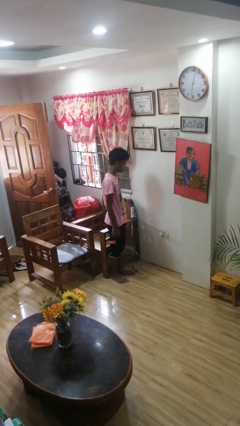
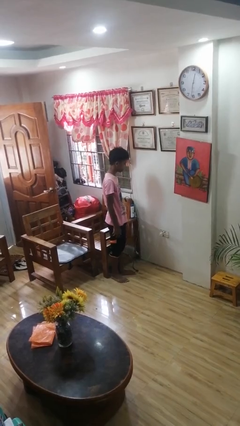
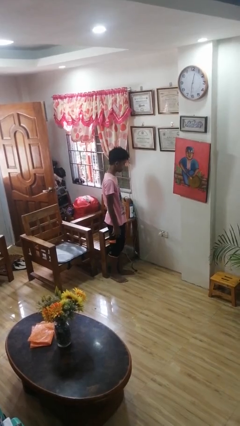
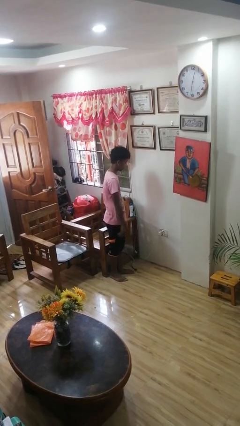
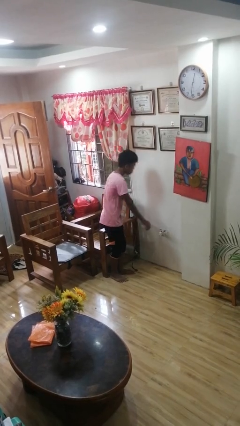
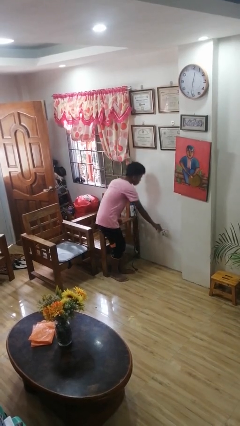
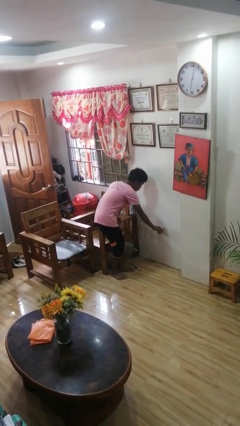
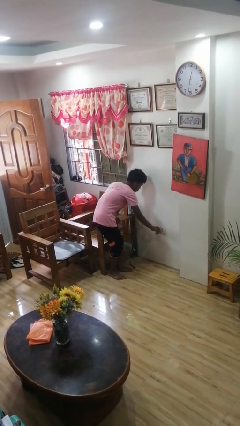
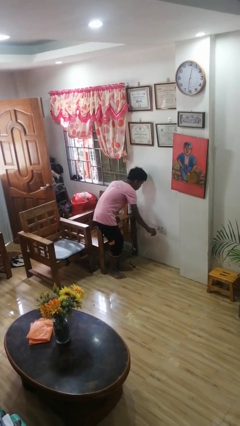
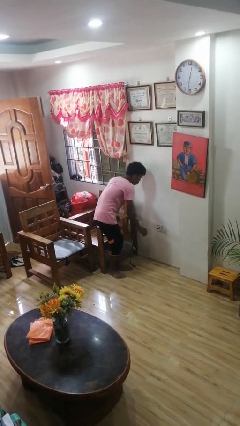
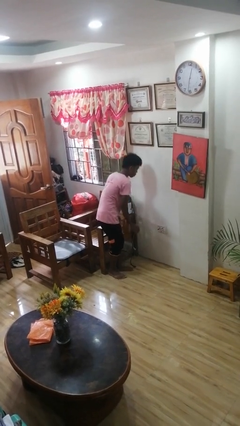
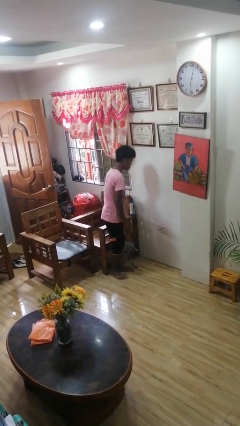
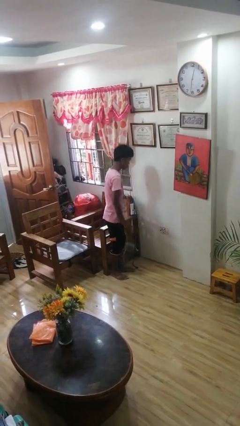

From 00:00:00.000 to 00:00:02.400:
person unplugs from electrical socket

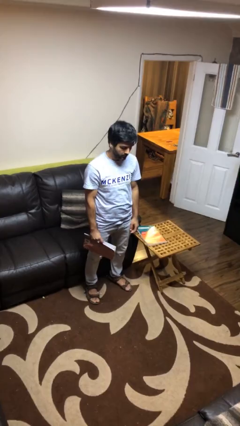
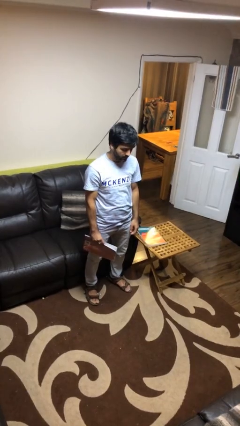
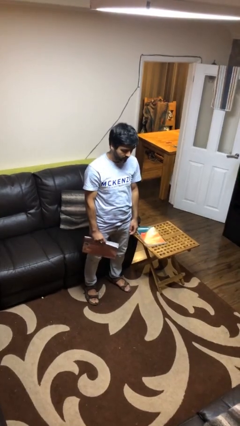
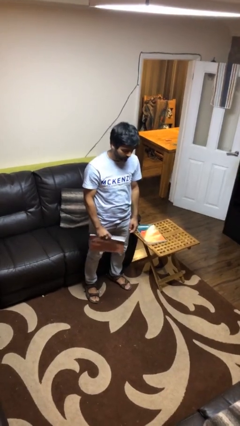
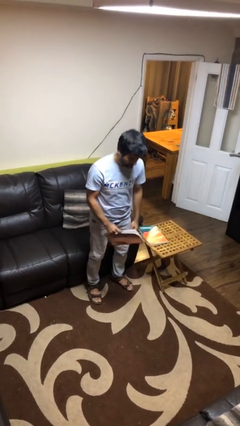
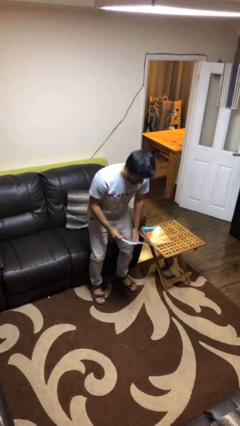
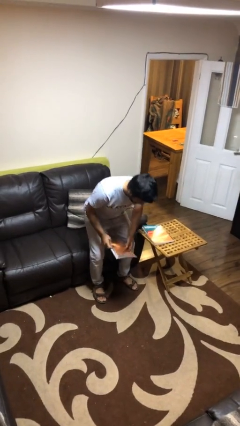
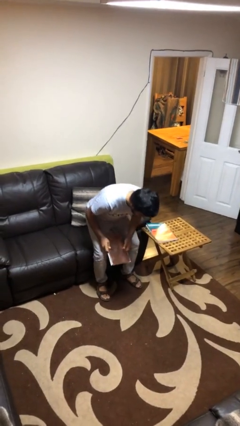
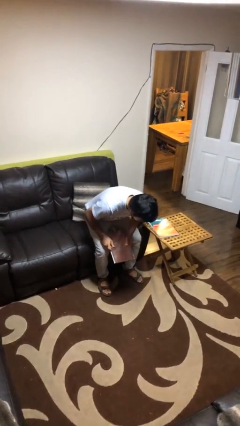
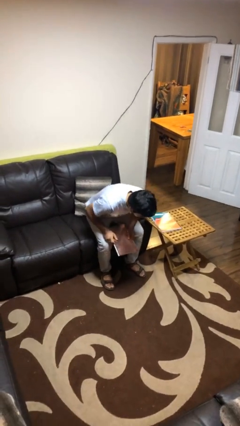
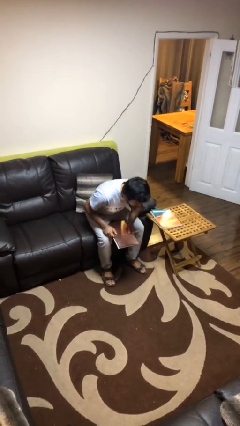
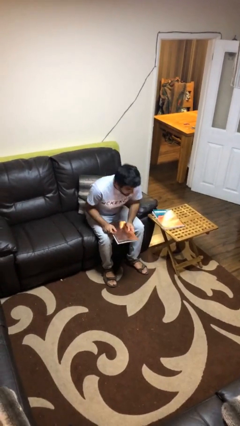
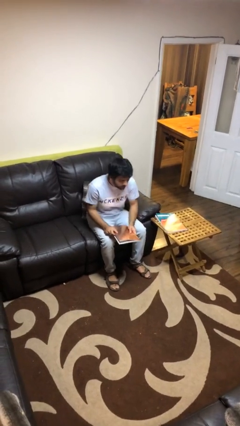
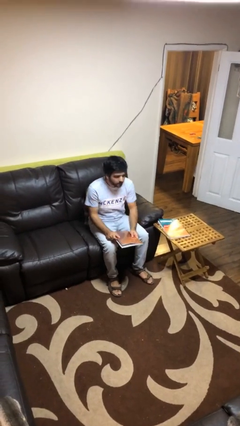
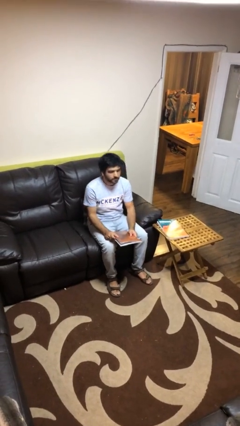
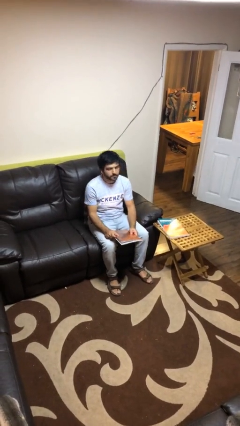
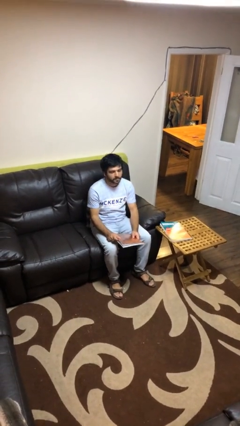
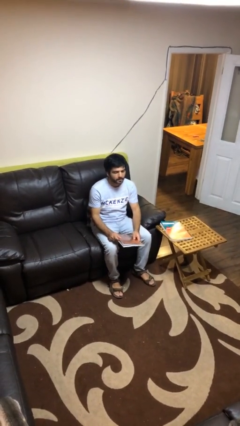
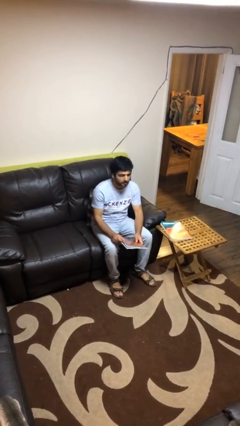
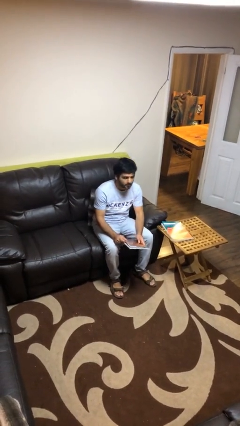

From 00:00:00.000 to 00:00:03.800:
person sits down

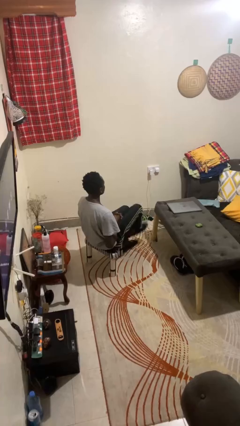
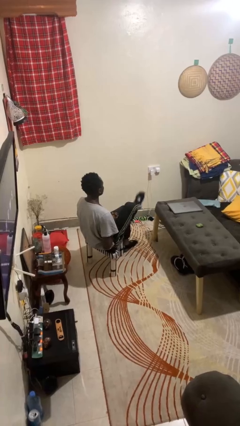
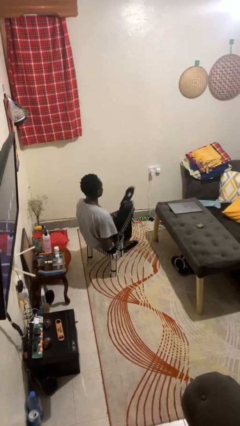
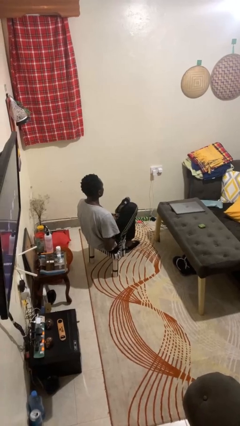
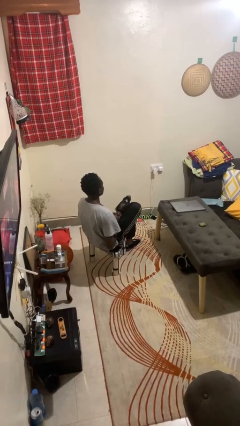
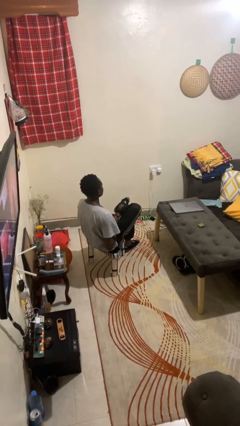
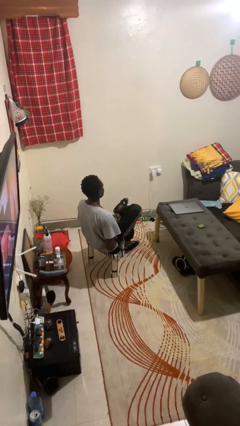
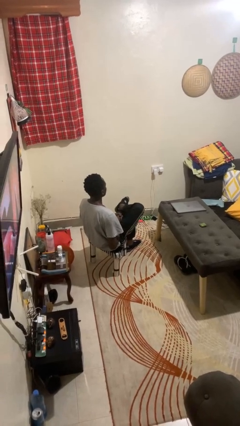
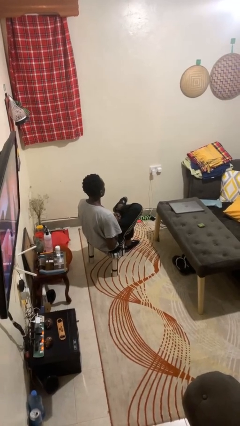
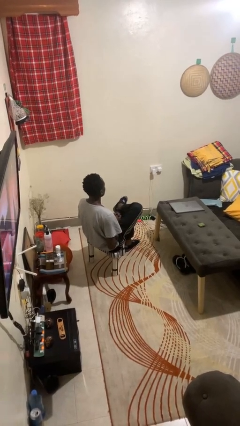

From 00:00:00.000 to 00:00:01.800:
person crosses legs

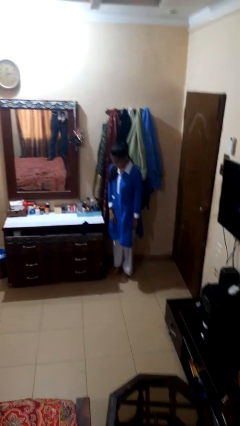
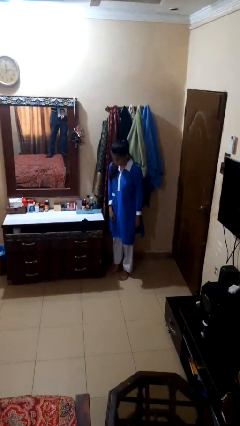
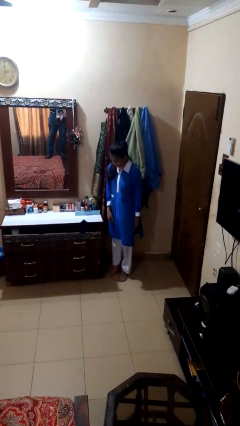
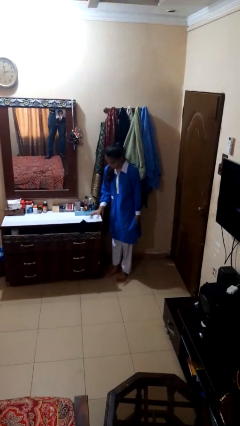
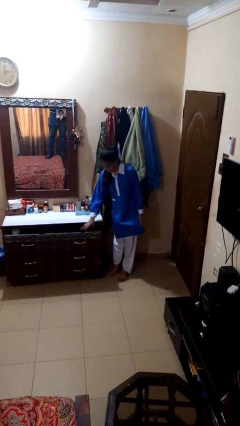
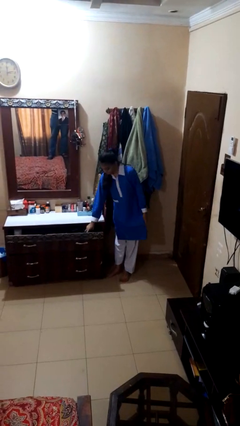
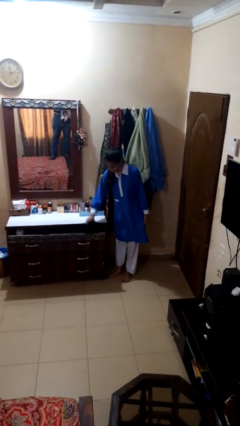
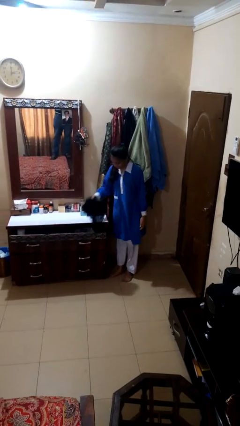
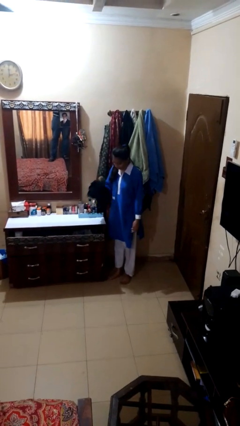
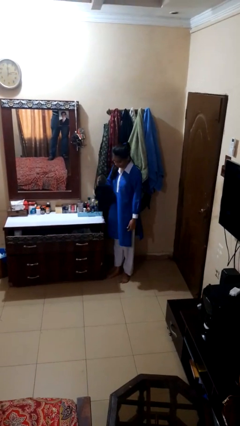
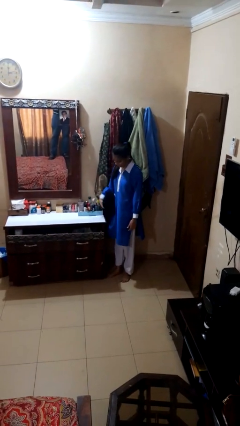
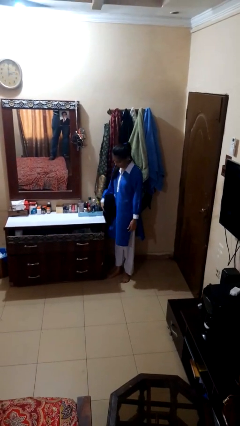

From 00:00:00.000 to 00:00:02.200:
person takes clothes from dresser

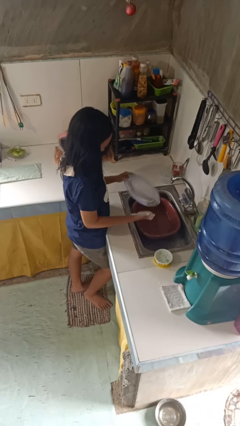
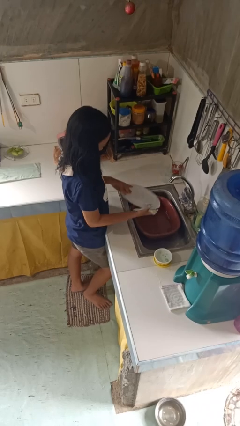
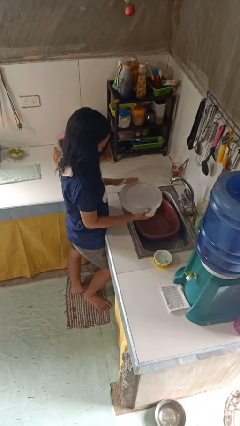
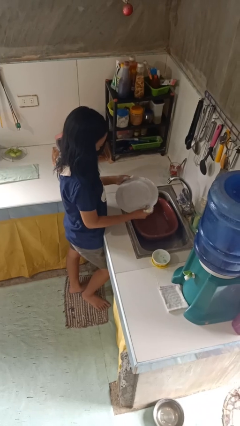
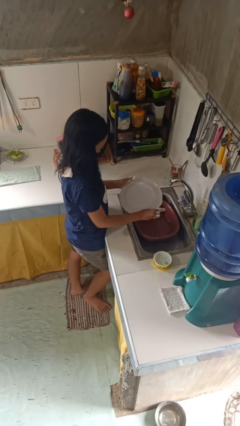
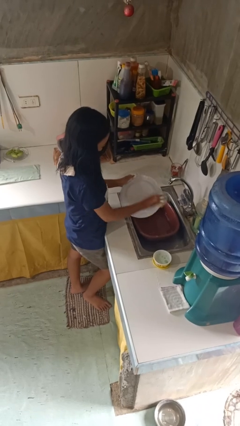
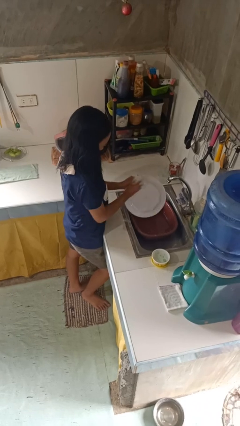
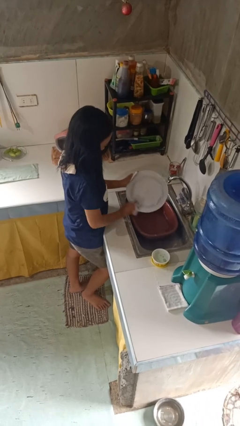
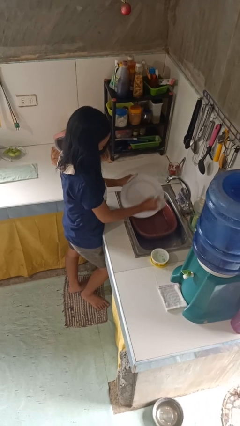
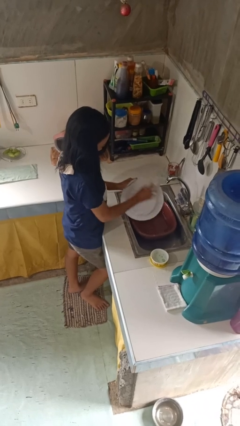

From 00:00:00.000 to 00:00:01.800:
person washes dish

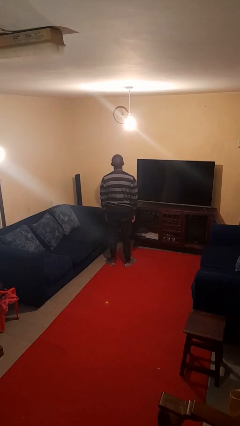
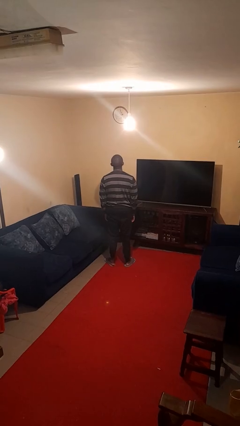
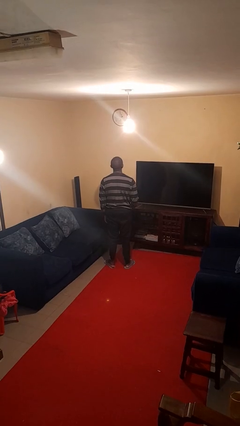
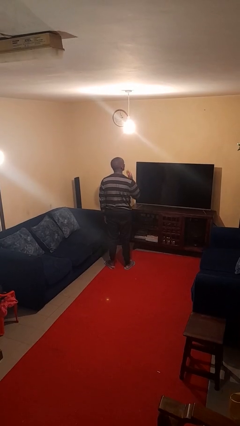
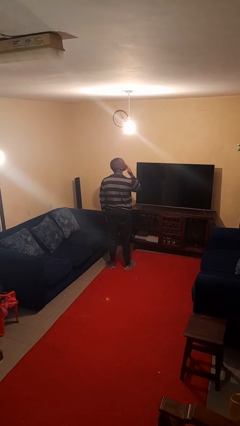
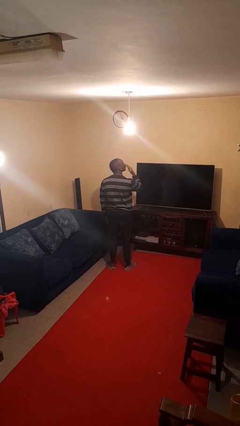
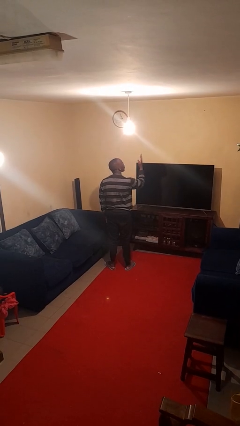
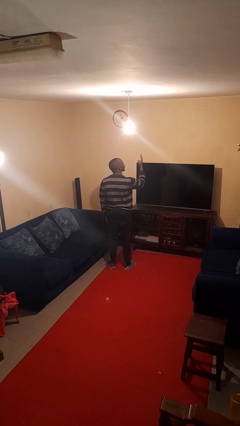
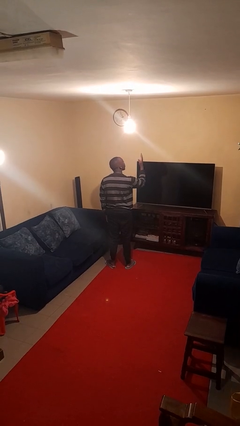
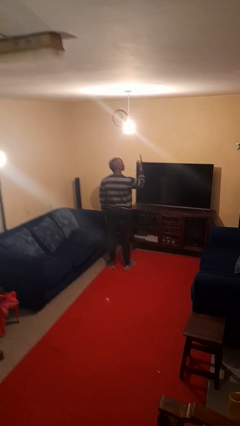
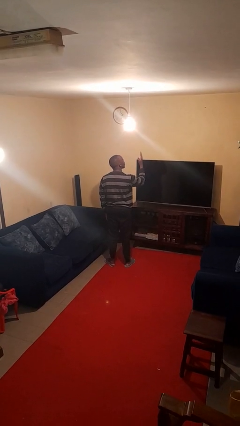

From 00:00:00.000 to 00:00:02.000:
person gestures blow kiss

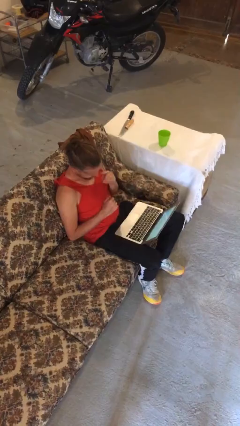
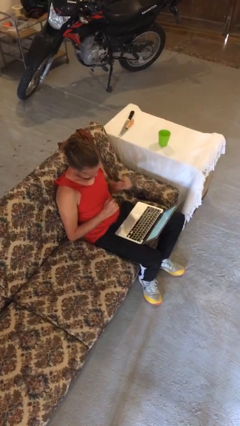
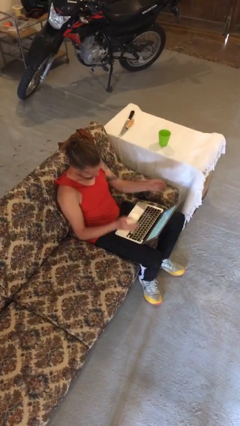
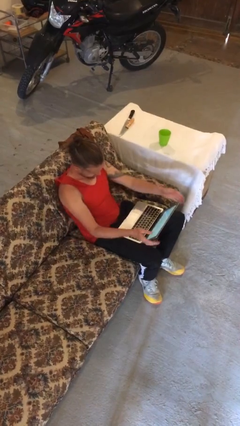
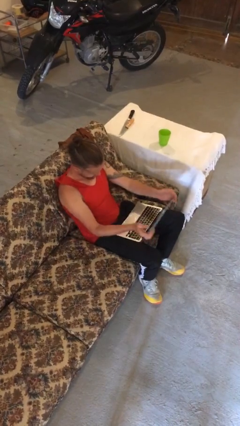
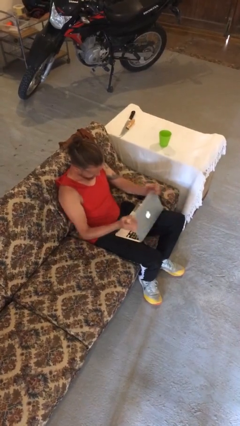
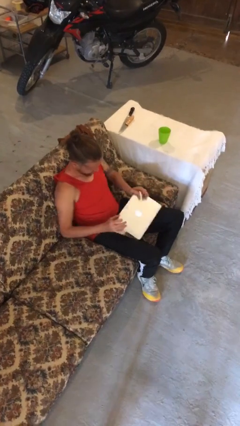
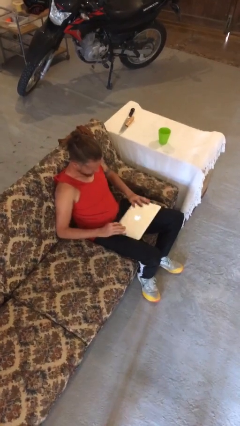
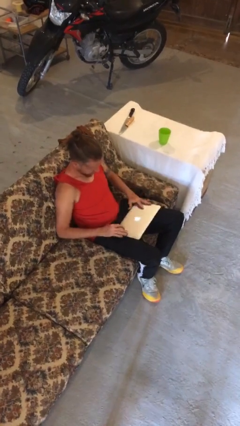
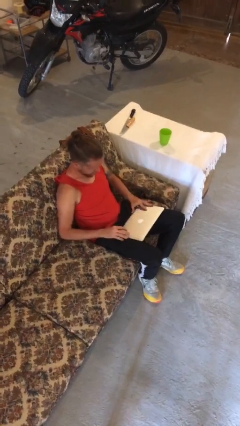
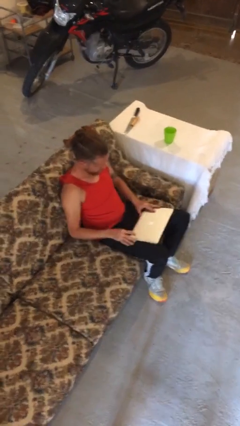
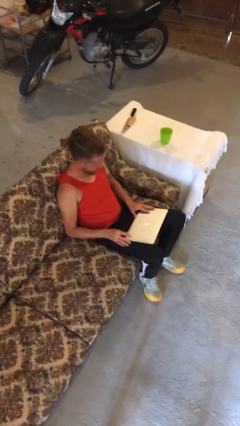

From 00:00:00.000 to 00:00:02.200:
person closes laptop

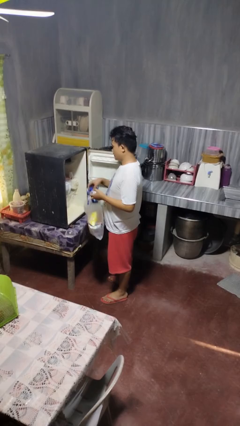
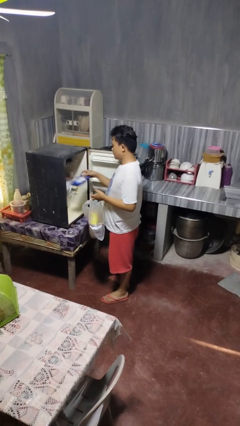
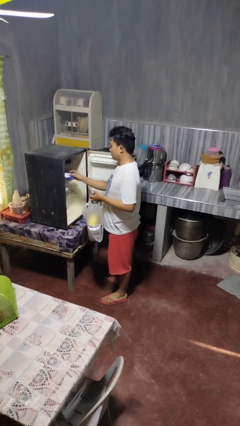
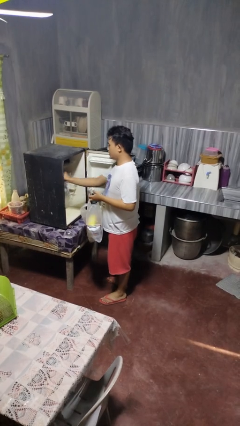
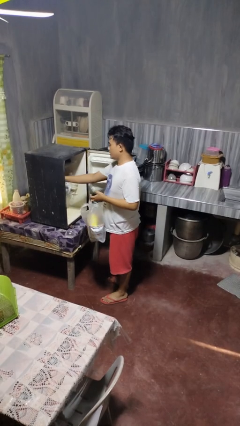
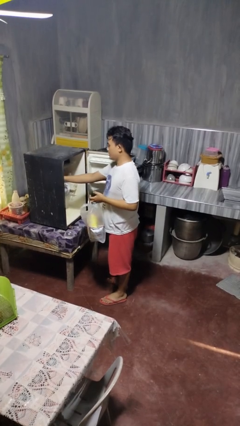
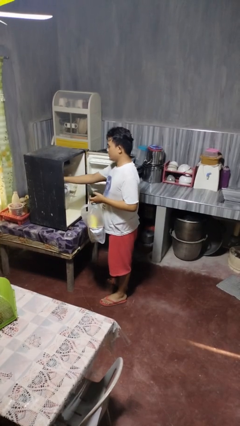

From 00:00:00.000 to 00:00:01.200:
person loads groceries into refrigerator
